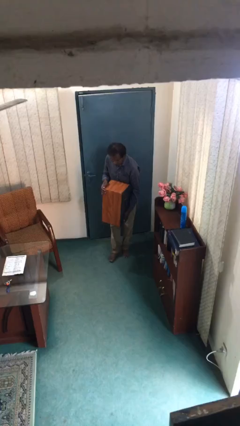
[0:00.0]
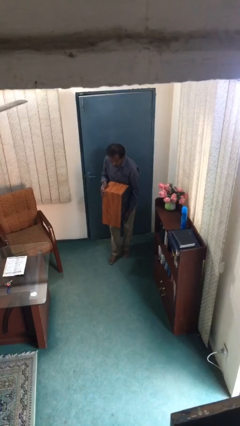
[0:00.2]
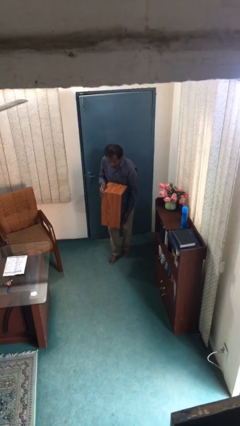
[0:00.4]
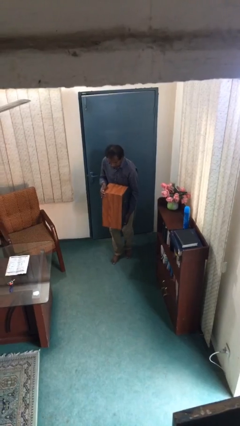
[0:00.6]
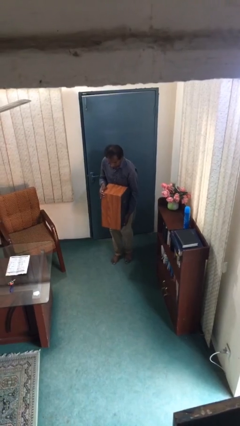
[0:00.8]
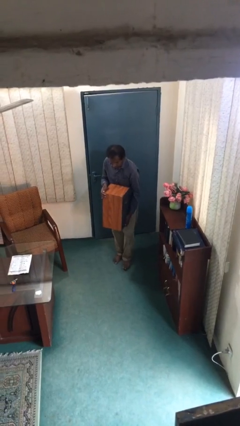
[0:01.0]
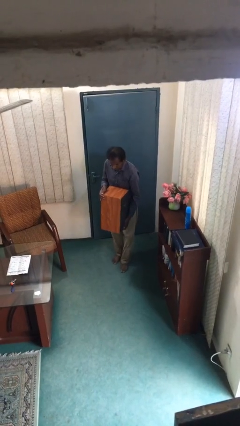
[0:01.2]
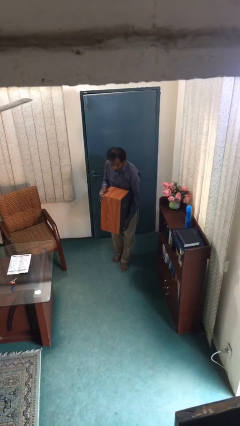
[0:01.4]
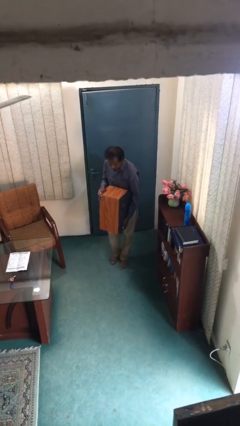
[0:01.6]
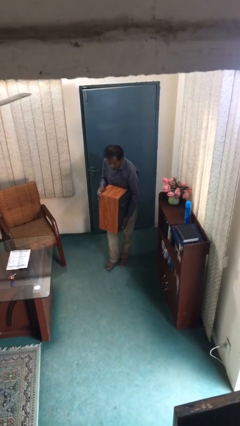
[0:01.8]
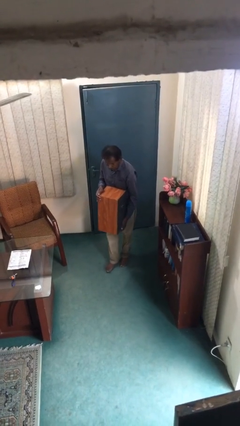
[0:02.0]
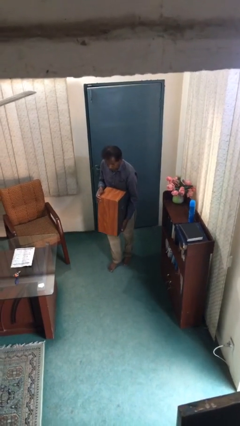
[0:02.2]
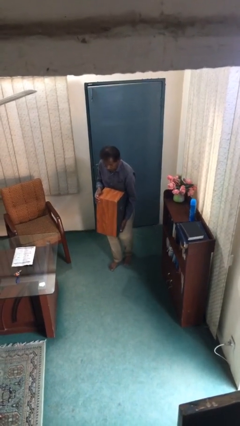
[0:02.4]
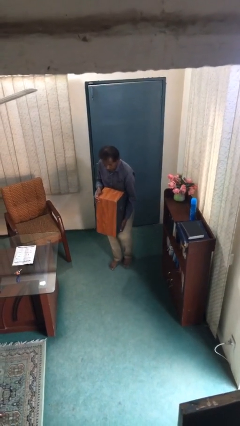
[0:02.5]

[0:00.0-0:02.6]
person carries heavy object

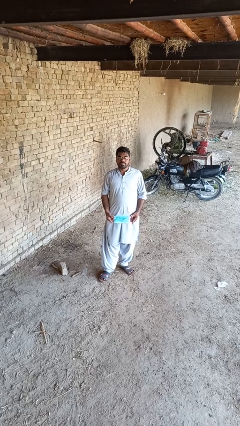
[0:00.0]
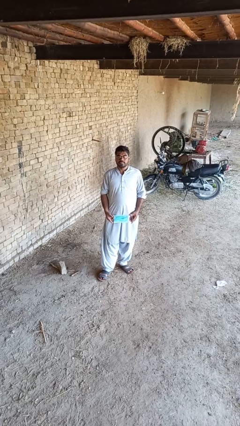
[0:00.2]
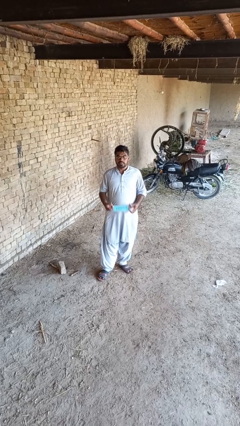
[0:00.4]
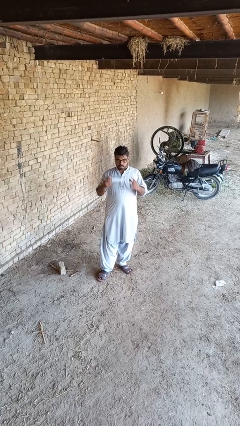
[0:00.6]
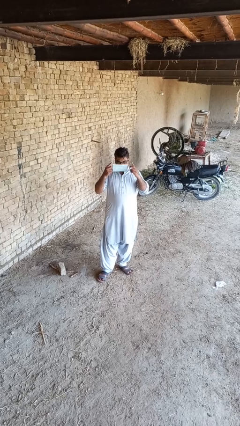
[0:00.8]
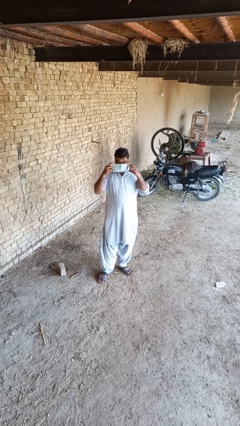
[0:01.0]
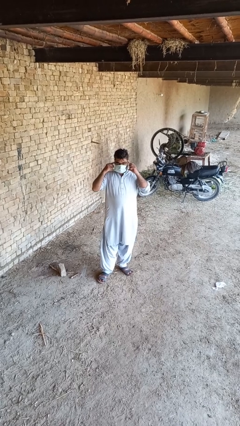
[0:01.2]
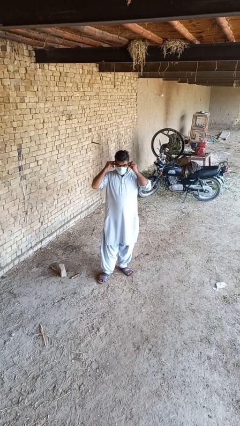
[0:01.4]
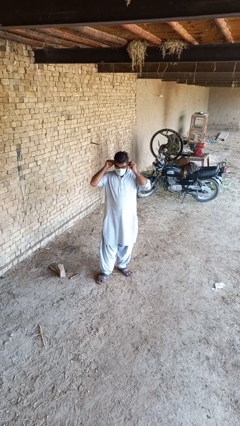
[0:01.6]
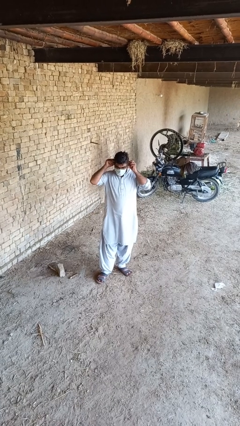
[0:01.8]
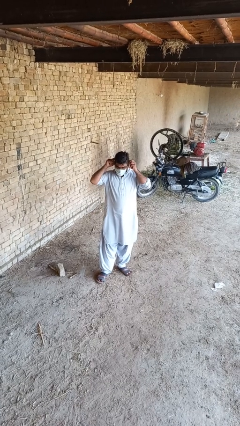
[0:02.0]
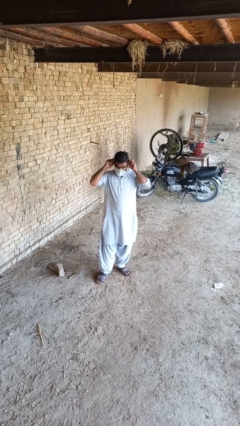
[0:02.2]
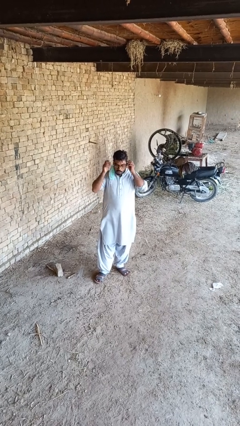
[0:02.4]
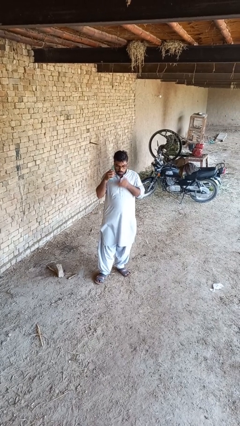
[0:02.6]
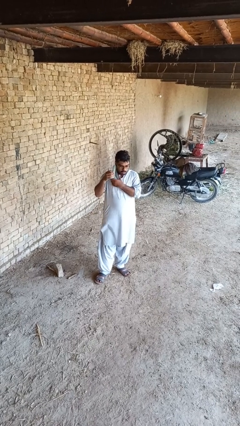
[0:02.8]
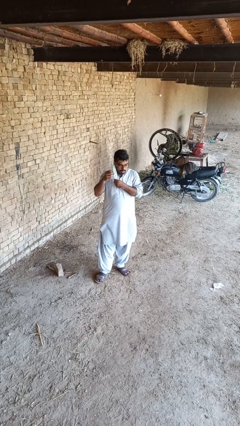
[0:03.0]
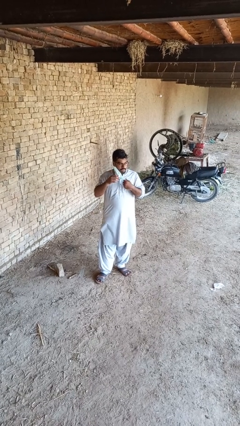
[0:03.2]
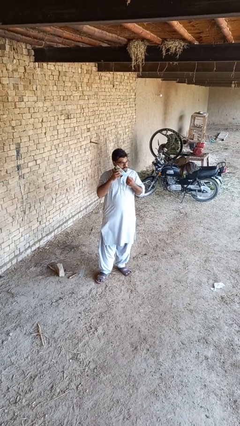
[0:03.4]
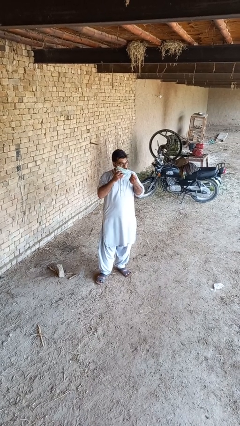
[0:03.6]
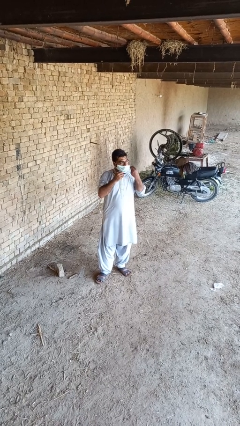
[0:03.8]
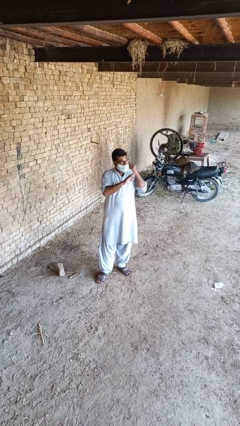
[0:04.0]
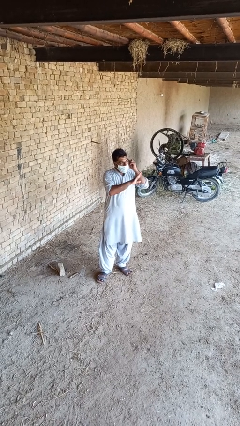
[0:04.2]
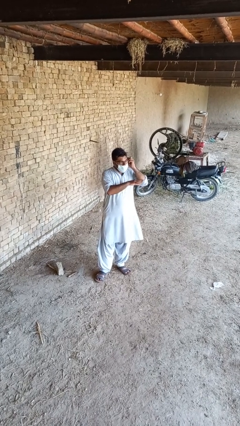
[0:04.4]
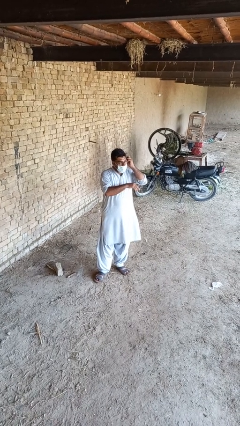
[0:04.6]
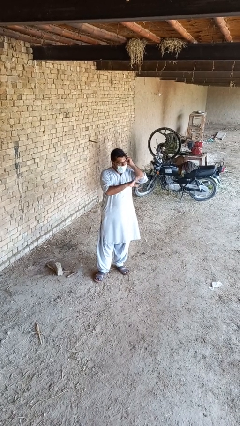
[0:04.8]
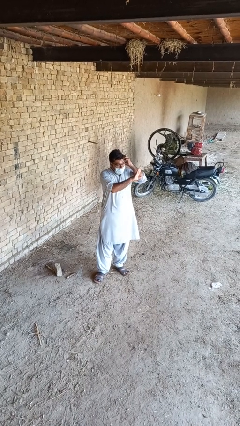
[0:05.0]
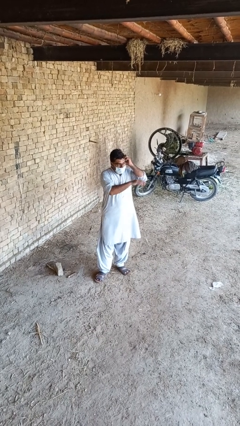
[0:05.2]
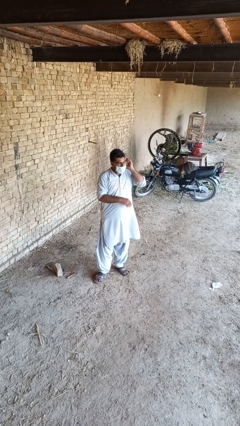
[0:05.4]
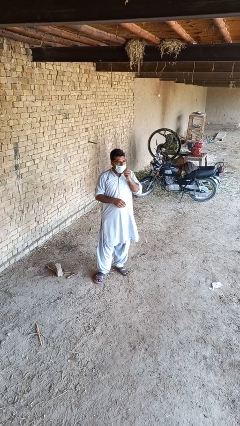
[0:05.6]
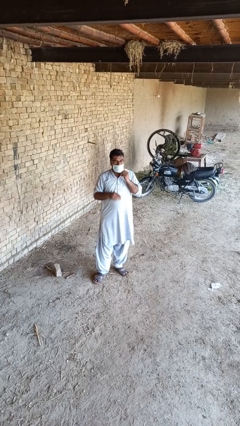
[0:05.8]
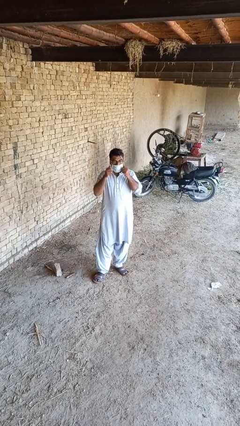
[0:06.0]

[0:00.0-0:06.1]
person puts on facemask

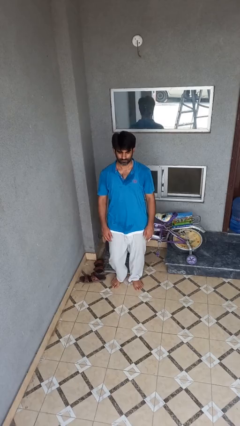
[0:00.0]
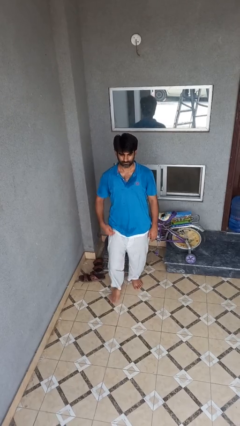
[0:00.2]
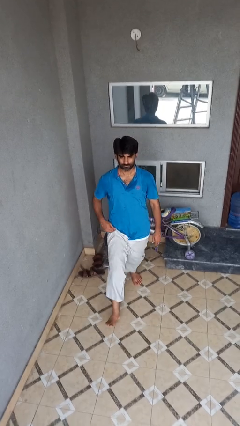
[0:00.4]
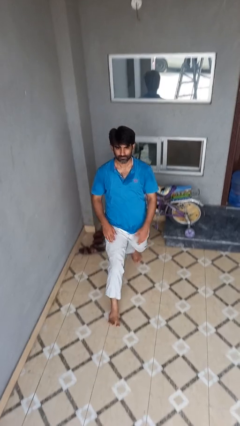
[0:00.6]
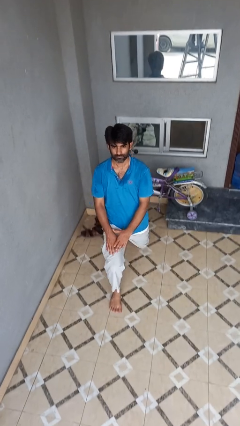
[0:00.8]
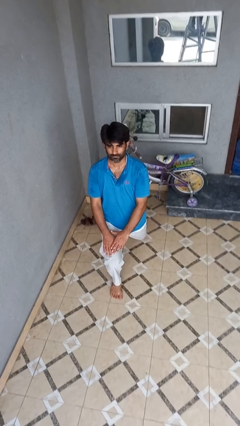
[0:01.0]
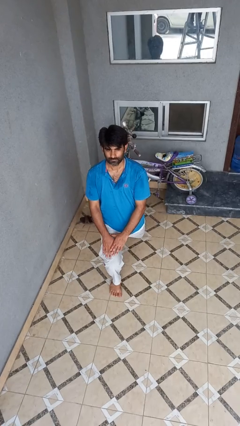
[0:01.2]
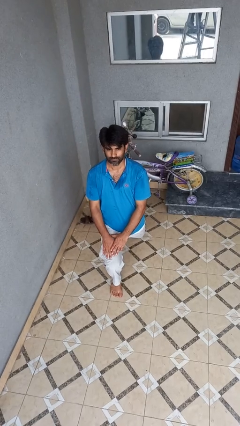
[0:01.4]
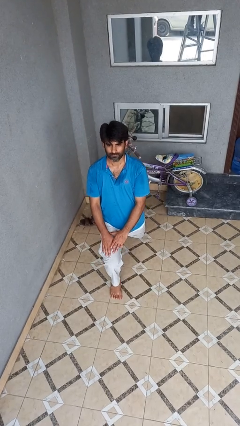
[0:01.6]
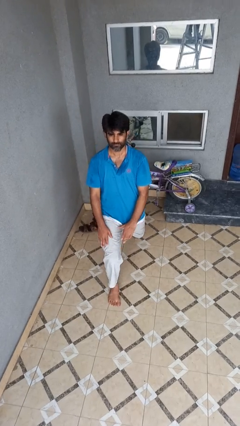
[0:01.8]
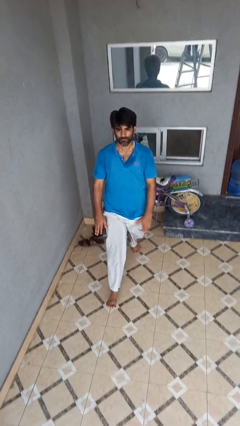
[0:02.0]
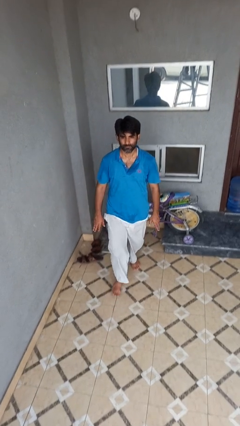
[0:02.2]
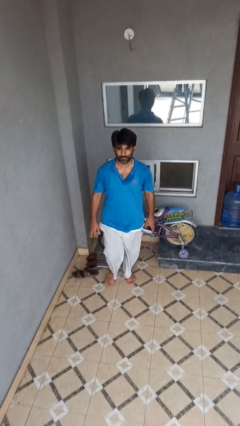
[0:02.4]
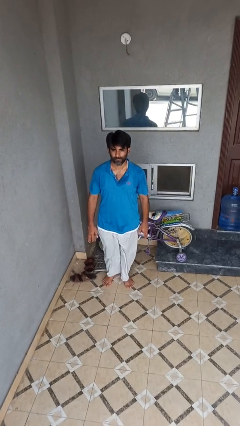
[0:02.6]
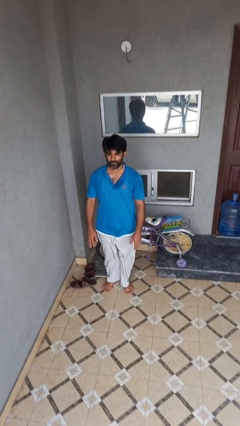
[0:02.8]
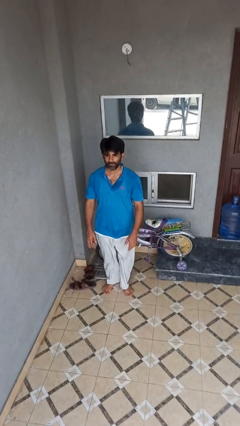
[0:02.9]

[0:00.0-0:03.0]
person exercises with lunges

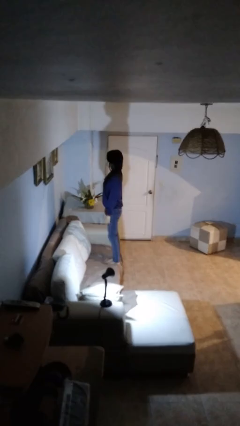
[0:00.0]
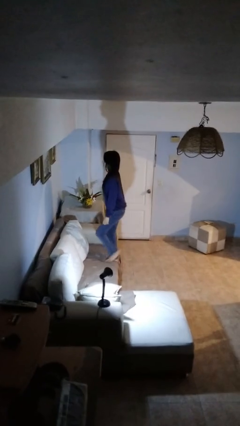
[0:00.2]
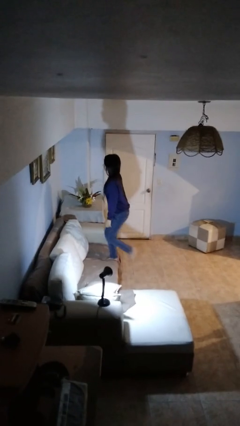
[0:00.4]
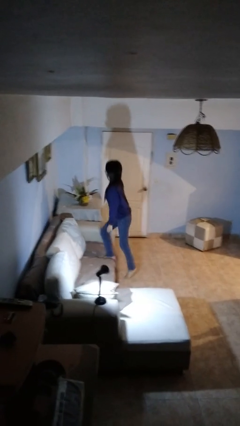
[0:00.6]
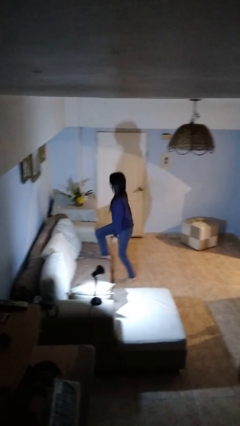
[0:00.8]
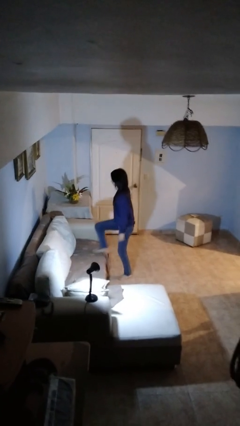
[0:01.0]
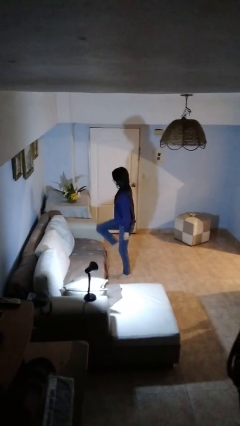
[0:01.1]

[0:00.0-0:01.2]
person climbs off couch

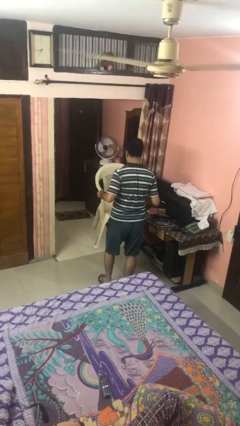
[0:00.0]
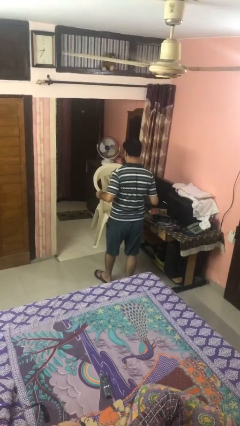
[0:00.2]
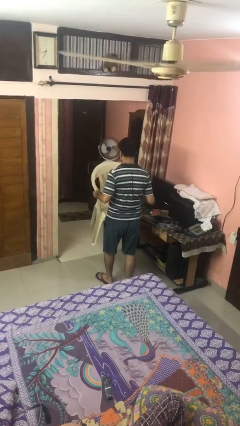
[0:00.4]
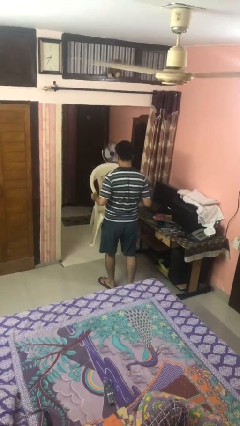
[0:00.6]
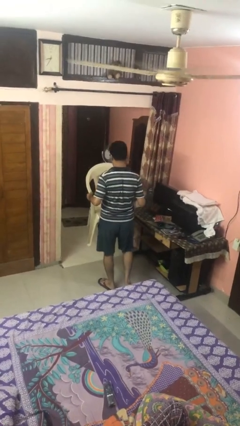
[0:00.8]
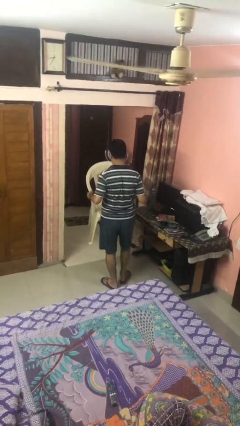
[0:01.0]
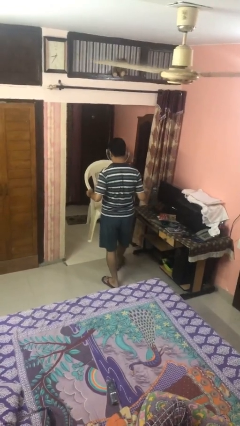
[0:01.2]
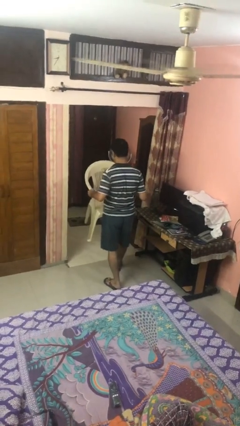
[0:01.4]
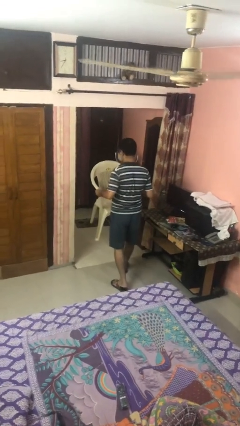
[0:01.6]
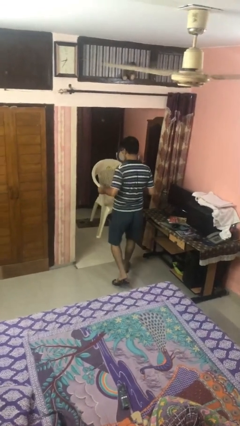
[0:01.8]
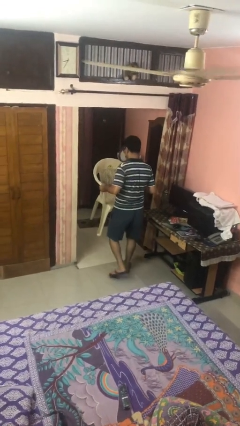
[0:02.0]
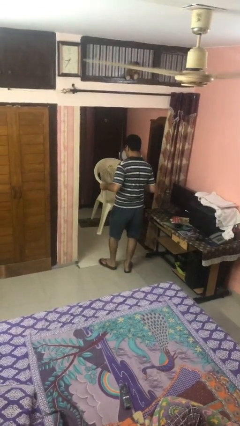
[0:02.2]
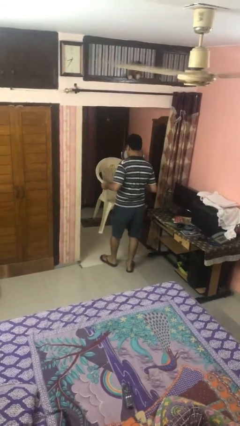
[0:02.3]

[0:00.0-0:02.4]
person carries furniture

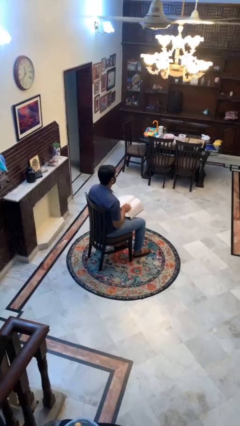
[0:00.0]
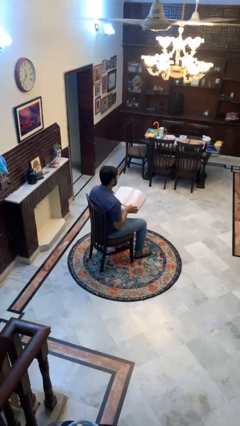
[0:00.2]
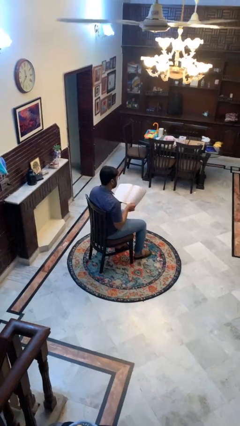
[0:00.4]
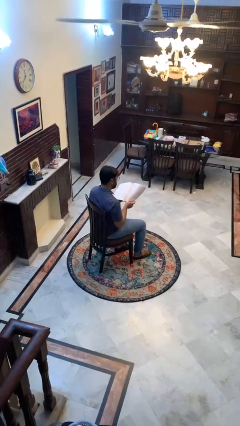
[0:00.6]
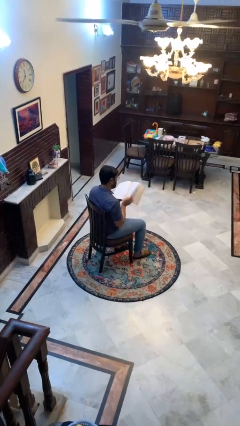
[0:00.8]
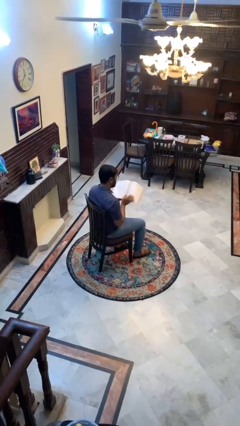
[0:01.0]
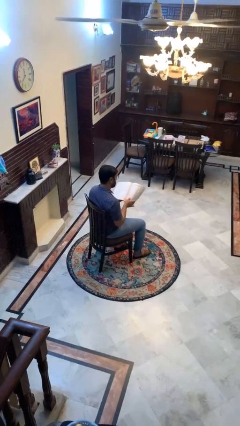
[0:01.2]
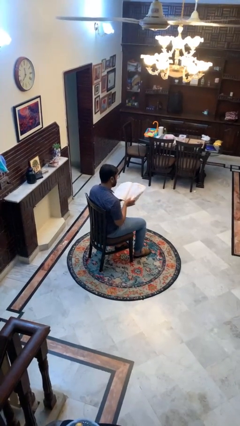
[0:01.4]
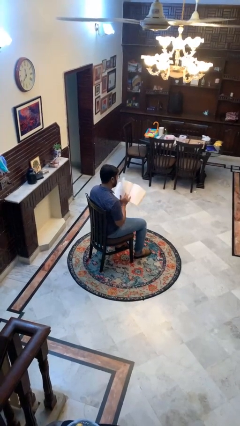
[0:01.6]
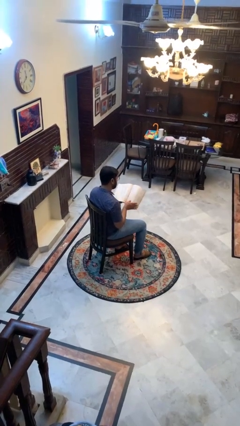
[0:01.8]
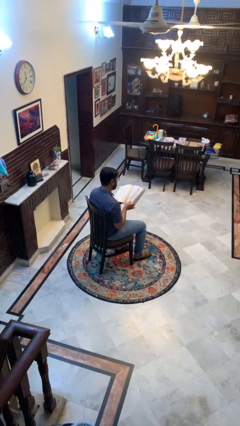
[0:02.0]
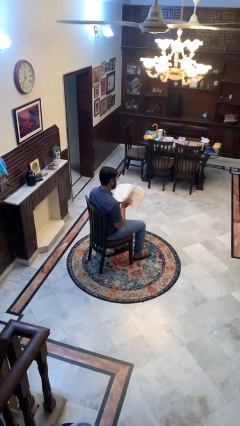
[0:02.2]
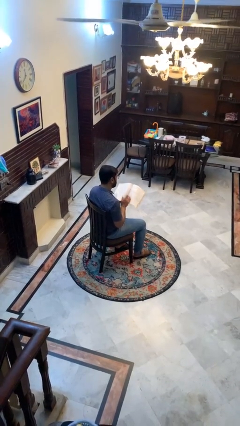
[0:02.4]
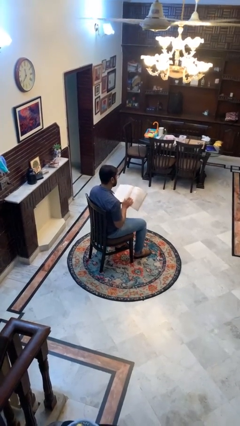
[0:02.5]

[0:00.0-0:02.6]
person reads book

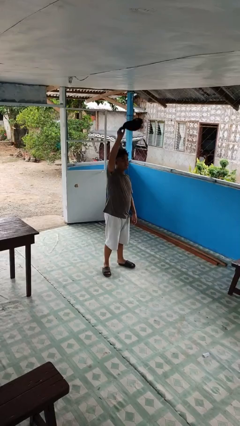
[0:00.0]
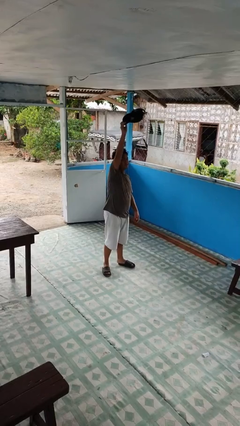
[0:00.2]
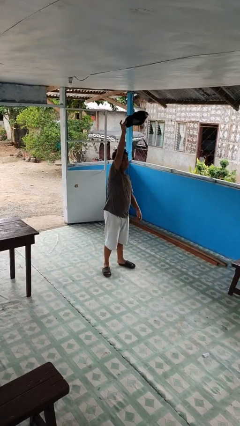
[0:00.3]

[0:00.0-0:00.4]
person drops object
